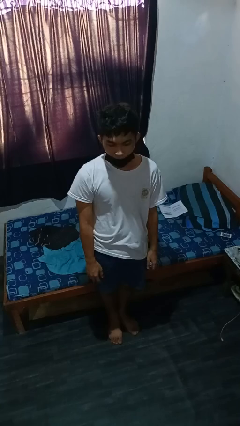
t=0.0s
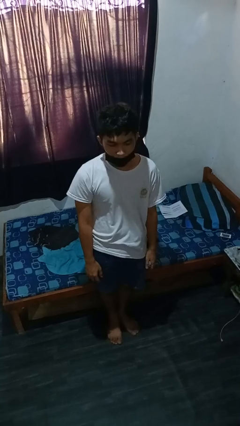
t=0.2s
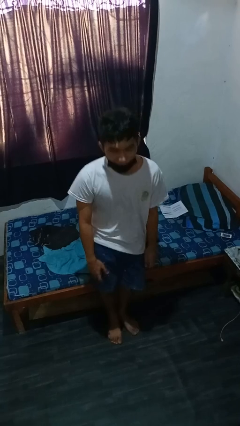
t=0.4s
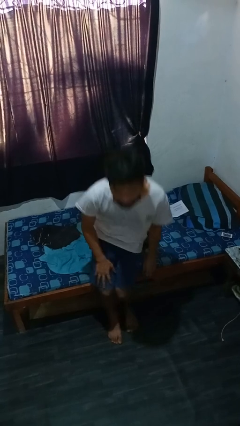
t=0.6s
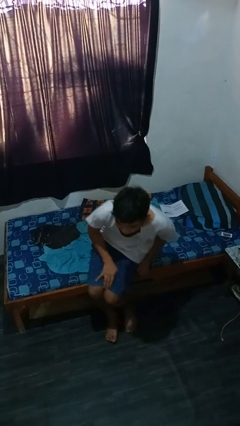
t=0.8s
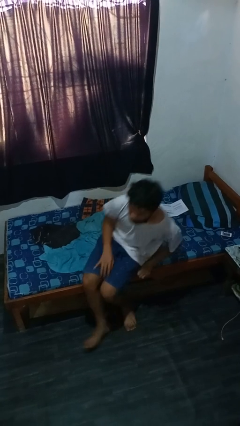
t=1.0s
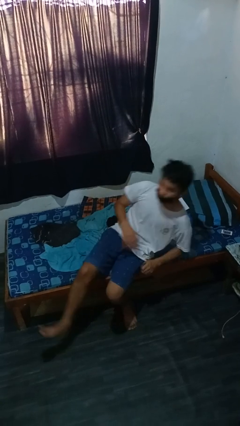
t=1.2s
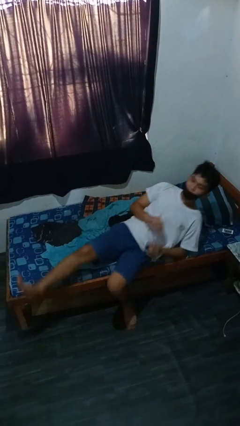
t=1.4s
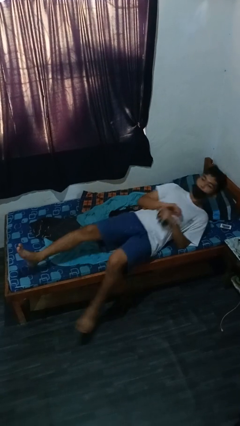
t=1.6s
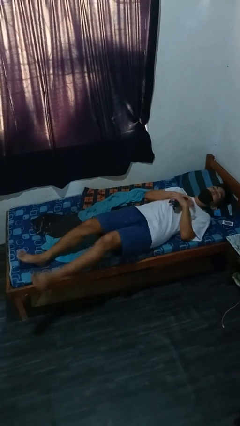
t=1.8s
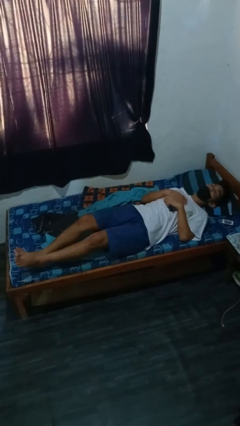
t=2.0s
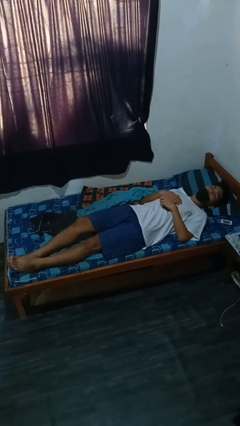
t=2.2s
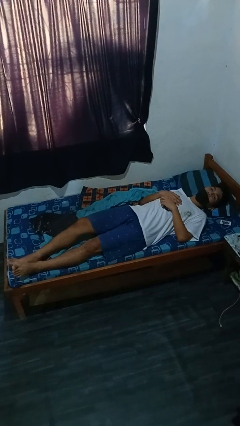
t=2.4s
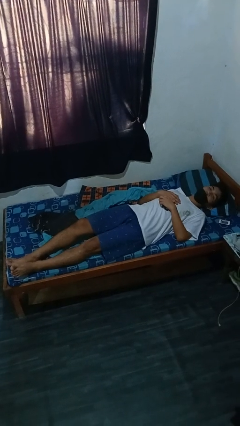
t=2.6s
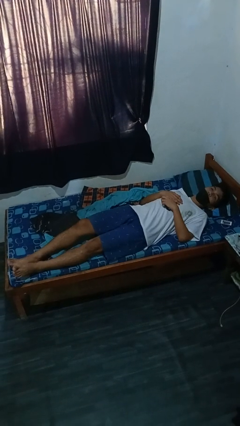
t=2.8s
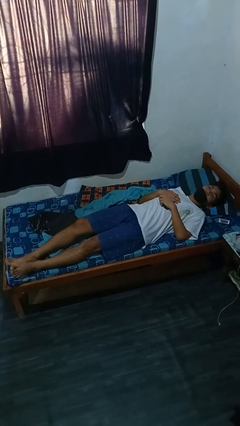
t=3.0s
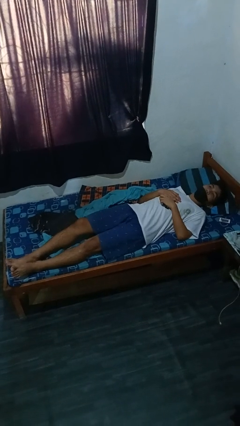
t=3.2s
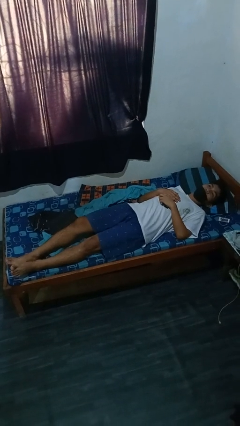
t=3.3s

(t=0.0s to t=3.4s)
person lies down on bed

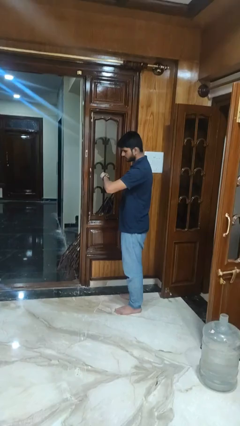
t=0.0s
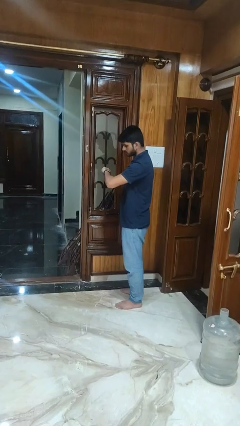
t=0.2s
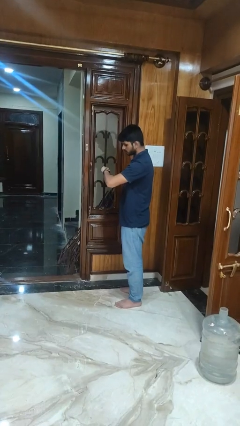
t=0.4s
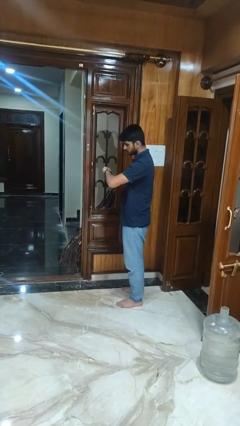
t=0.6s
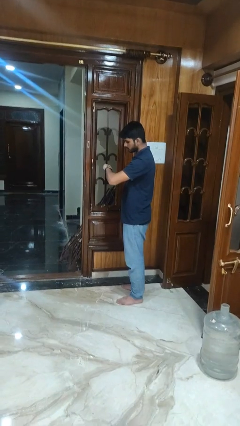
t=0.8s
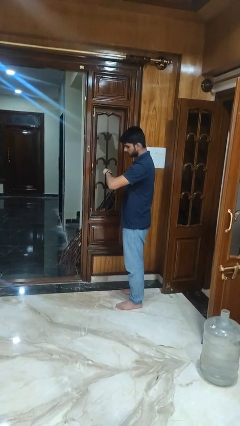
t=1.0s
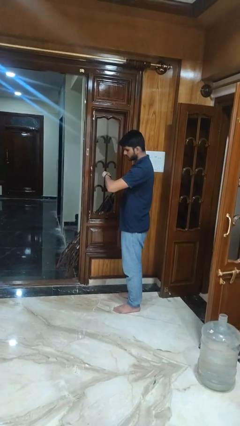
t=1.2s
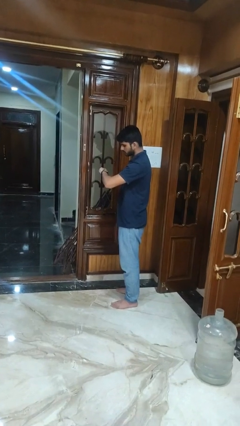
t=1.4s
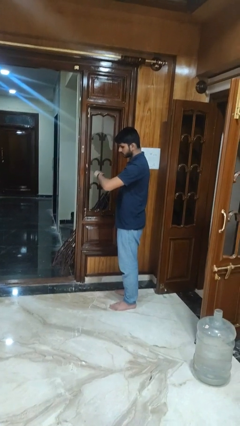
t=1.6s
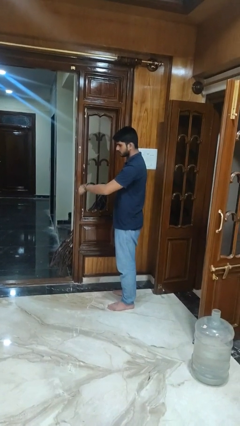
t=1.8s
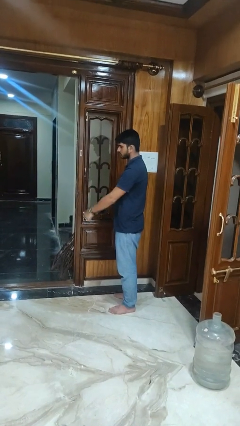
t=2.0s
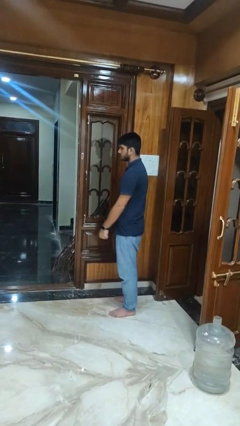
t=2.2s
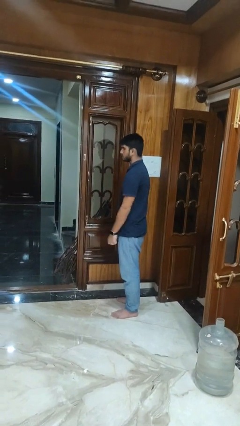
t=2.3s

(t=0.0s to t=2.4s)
person looks at wristwatch

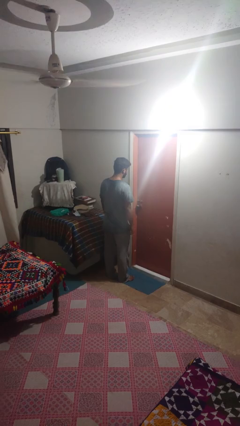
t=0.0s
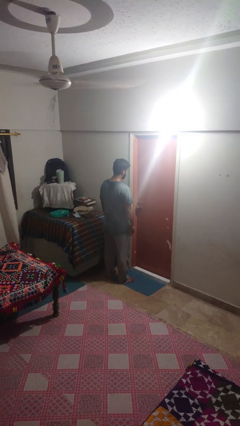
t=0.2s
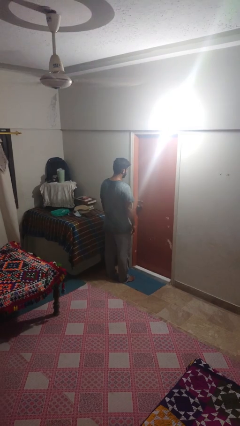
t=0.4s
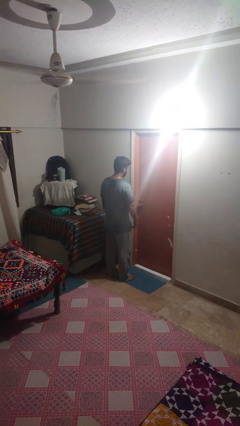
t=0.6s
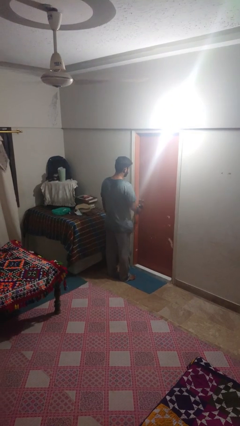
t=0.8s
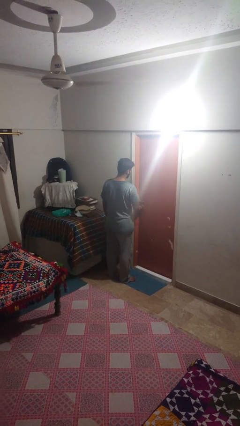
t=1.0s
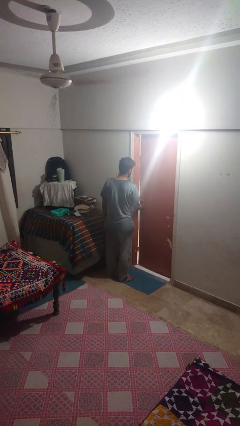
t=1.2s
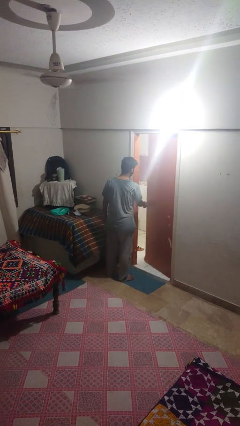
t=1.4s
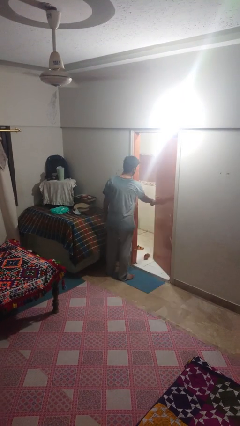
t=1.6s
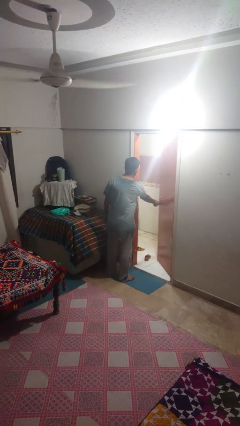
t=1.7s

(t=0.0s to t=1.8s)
person opens facility door

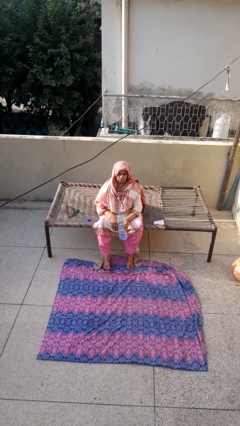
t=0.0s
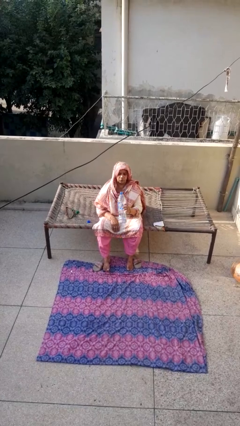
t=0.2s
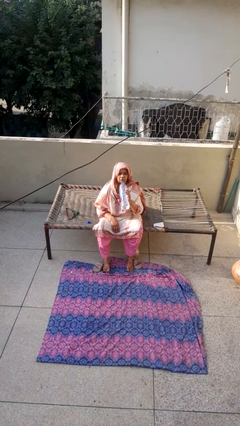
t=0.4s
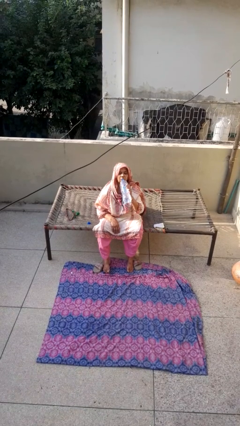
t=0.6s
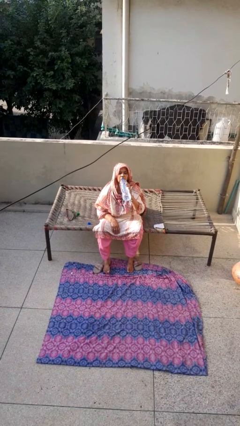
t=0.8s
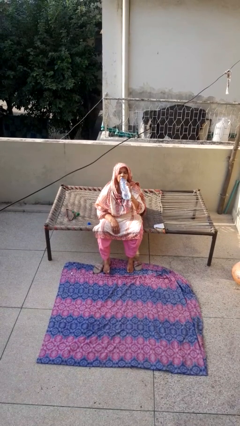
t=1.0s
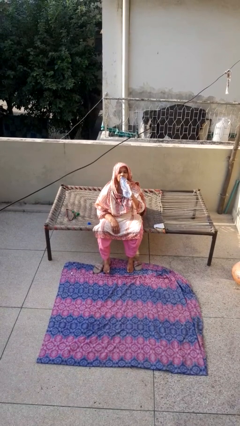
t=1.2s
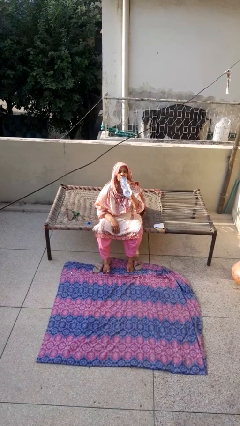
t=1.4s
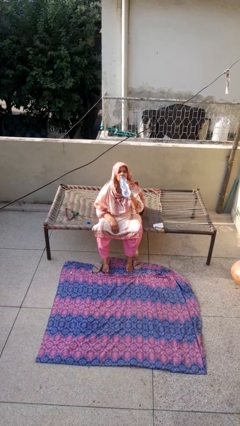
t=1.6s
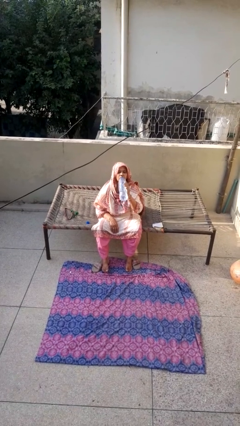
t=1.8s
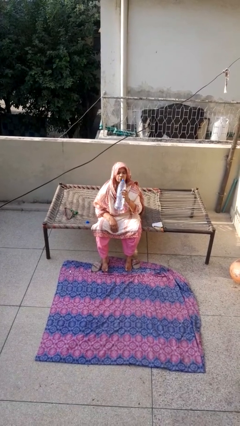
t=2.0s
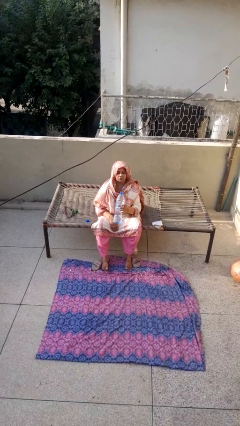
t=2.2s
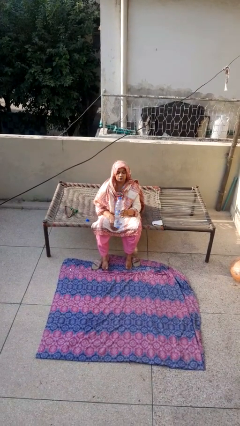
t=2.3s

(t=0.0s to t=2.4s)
person drinks from bottle

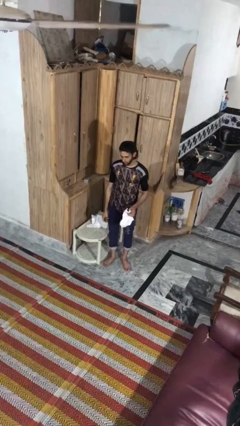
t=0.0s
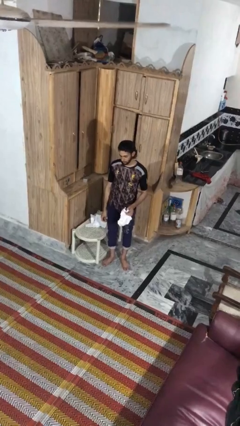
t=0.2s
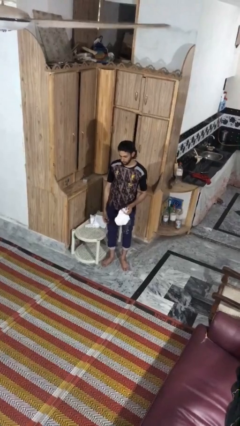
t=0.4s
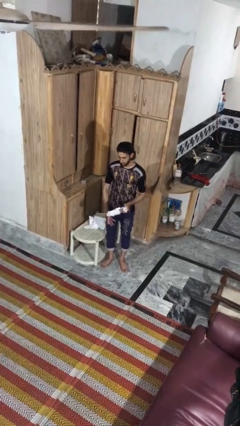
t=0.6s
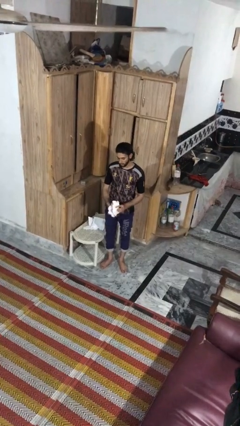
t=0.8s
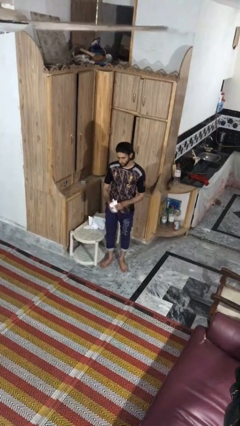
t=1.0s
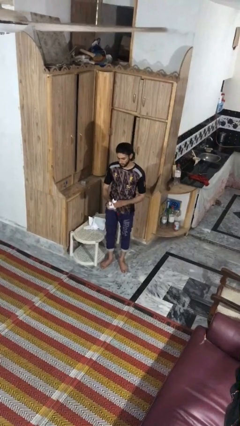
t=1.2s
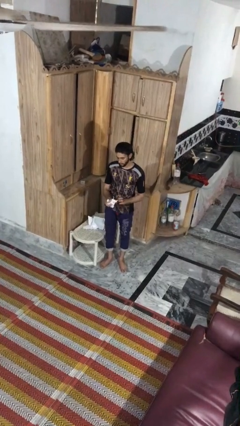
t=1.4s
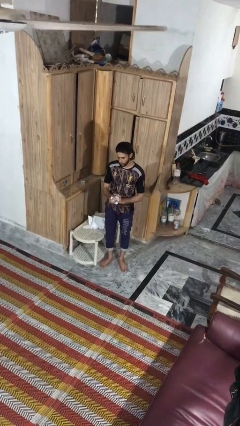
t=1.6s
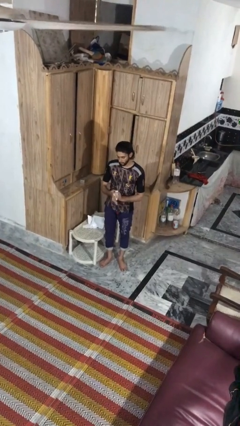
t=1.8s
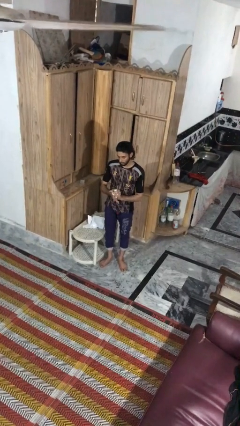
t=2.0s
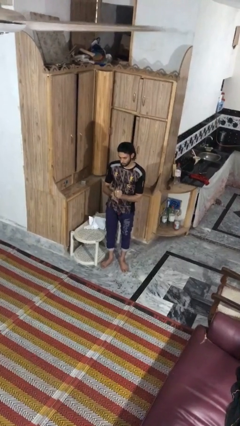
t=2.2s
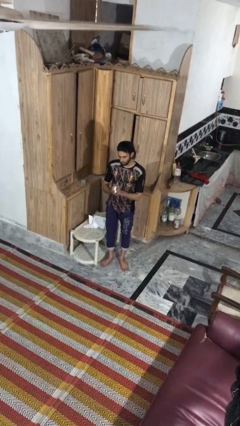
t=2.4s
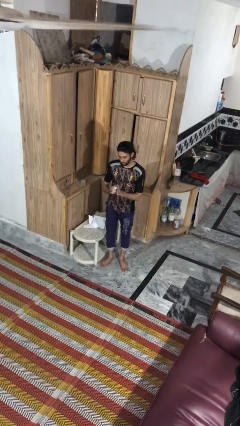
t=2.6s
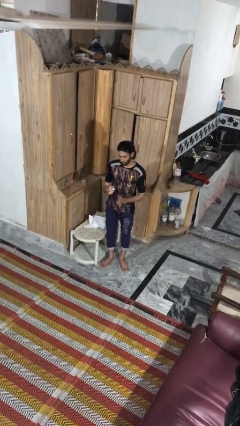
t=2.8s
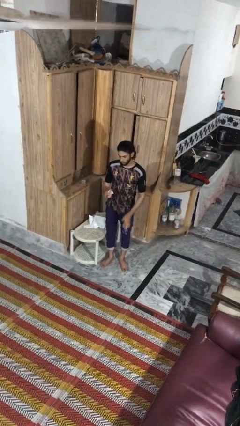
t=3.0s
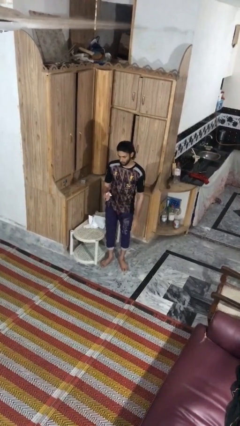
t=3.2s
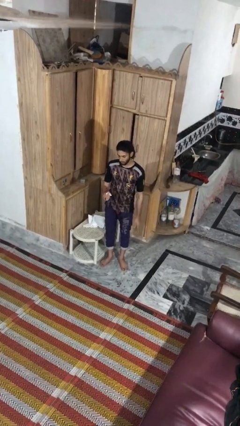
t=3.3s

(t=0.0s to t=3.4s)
person crumples paper

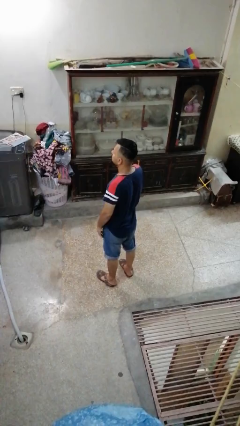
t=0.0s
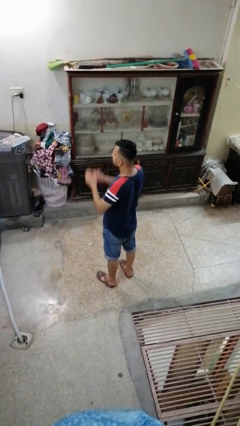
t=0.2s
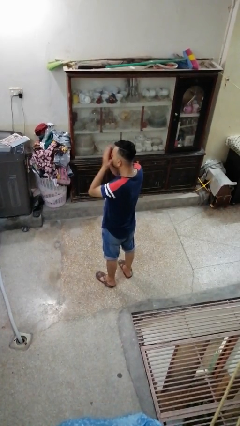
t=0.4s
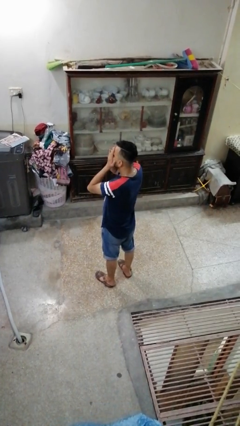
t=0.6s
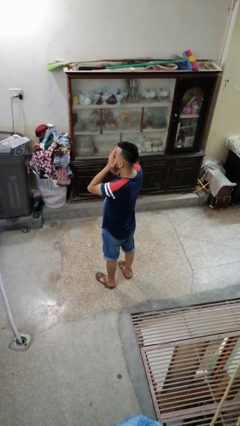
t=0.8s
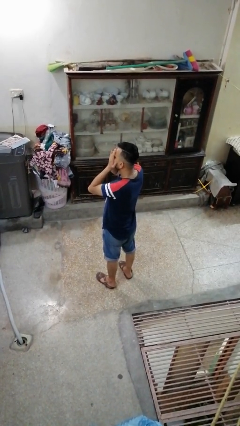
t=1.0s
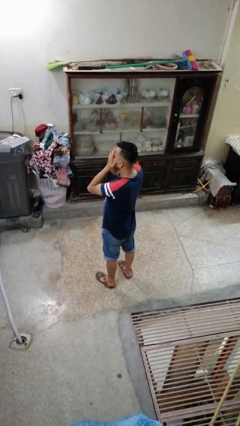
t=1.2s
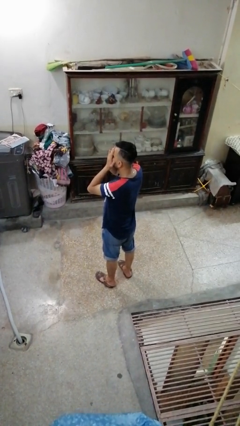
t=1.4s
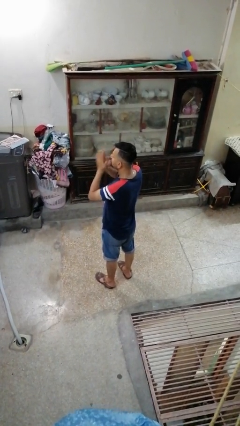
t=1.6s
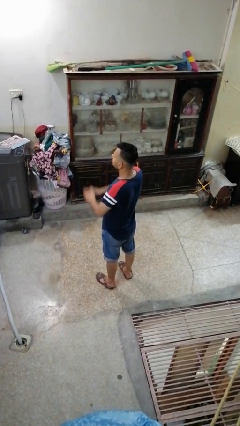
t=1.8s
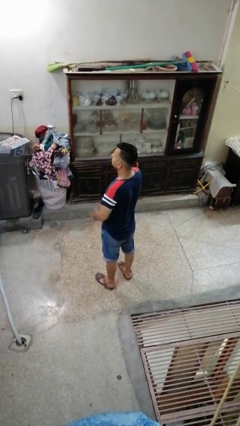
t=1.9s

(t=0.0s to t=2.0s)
person covers face with hands

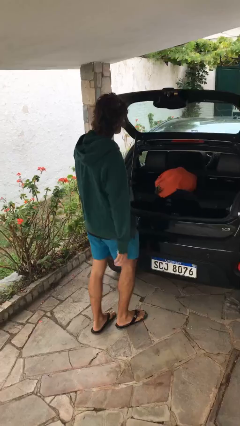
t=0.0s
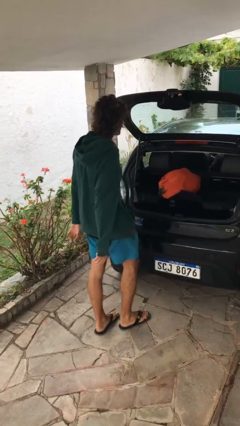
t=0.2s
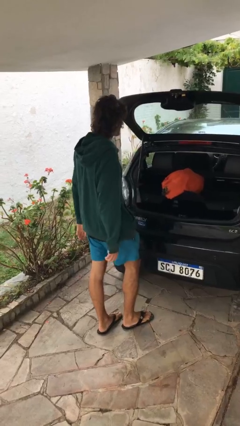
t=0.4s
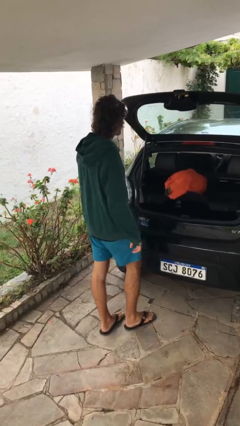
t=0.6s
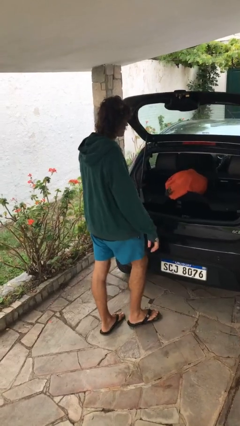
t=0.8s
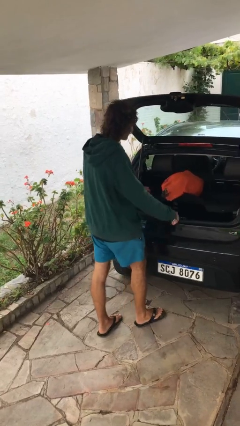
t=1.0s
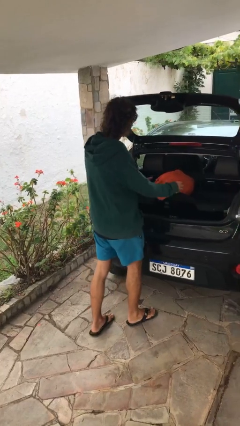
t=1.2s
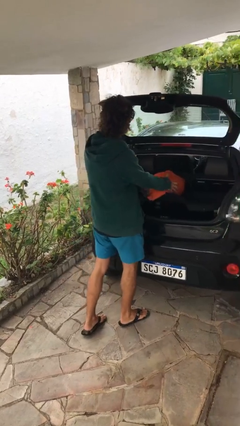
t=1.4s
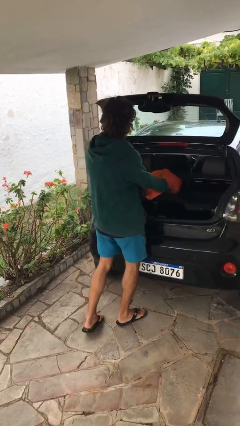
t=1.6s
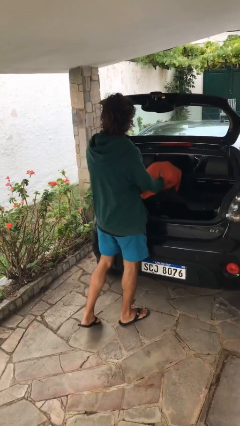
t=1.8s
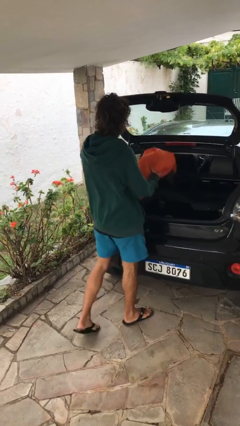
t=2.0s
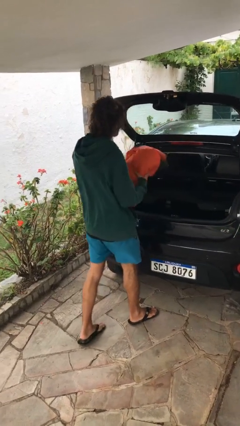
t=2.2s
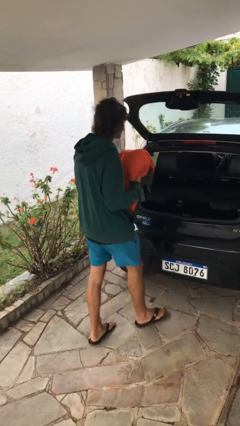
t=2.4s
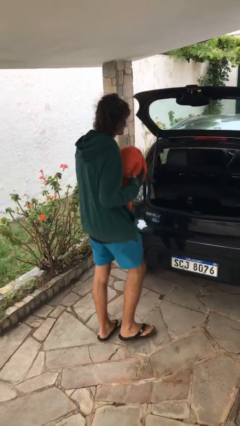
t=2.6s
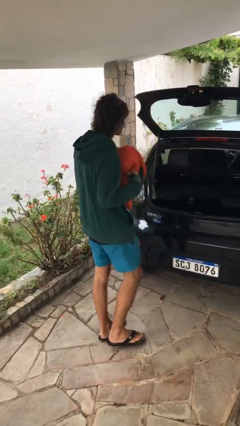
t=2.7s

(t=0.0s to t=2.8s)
person unloads car
